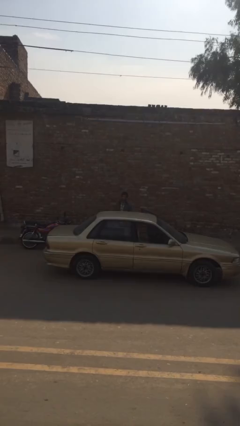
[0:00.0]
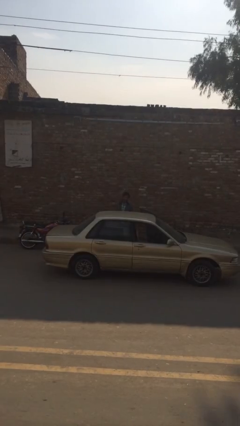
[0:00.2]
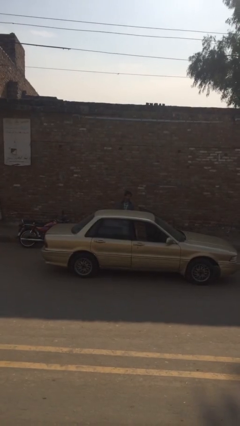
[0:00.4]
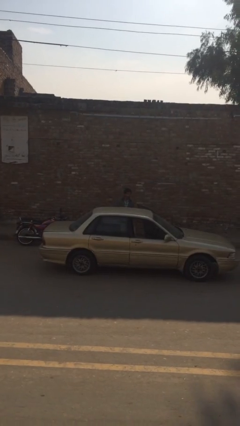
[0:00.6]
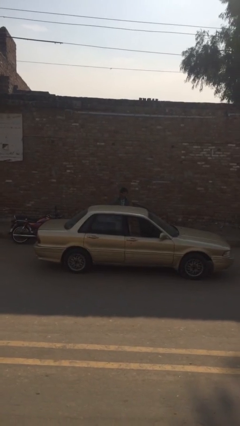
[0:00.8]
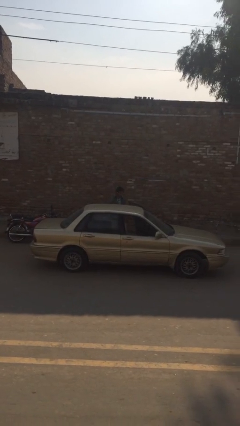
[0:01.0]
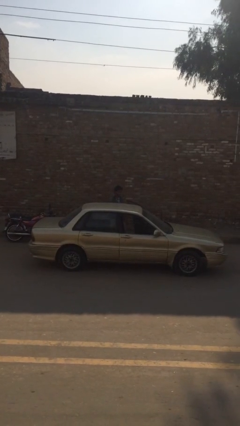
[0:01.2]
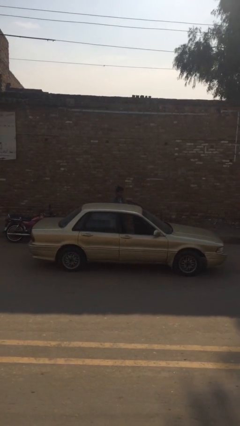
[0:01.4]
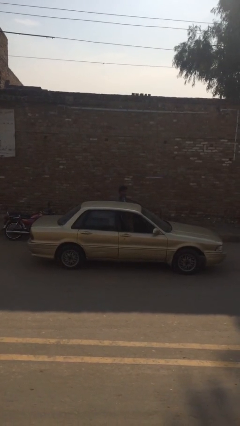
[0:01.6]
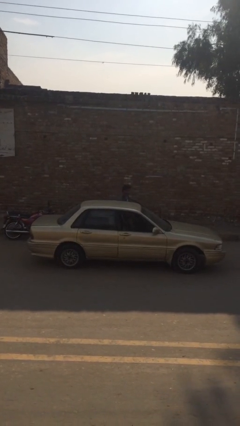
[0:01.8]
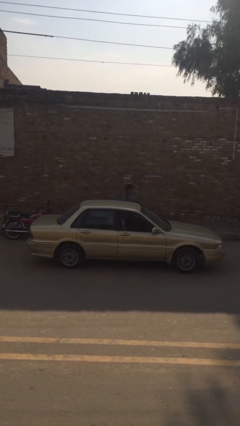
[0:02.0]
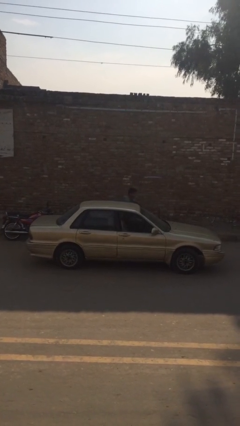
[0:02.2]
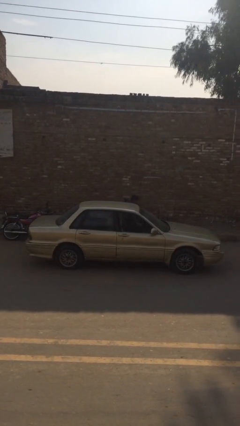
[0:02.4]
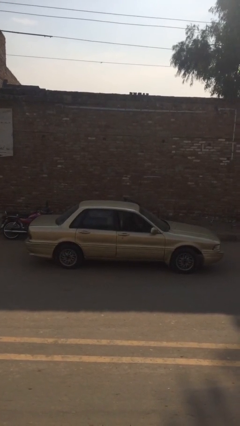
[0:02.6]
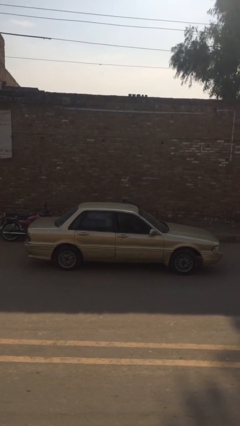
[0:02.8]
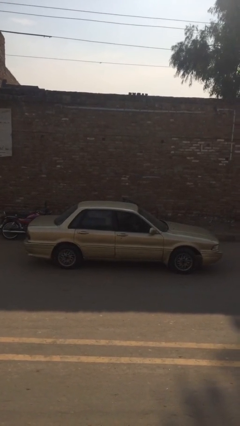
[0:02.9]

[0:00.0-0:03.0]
person enters car

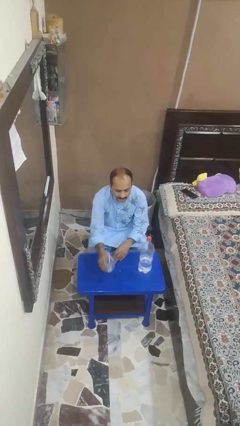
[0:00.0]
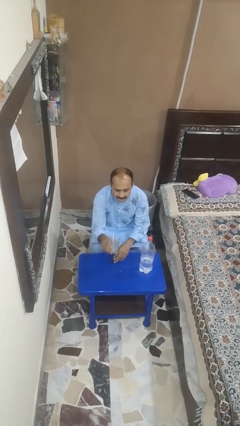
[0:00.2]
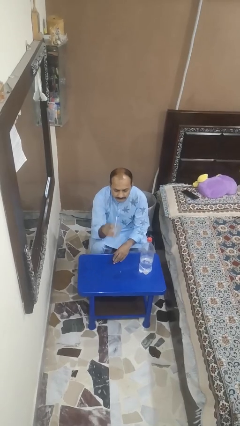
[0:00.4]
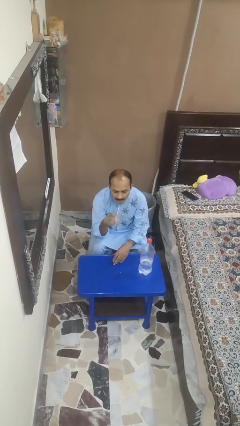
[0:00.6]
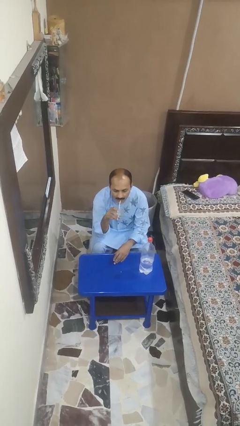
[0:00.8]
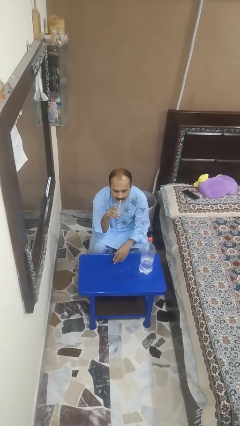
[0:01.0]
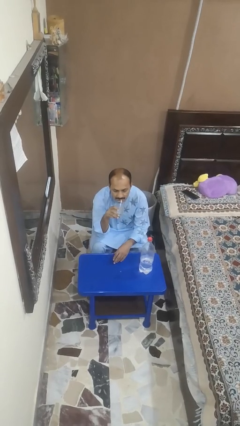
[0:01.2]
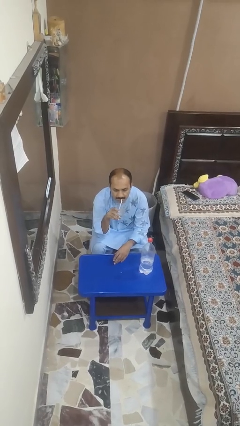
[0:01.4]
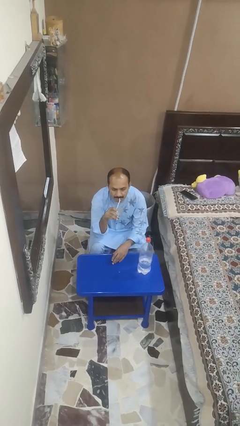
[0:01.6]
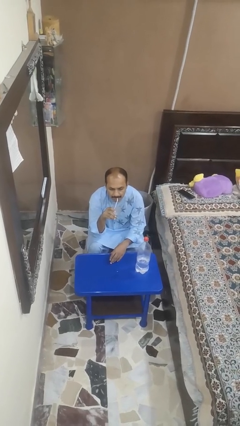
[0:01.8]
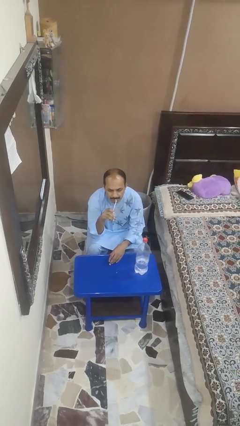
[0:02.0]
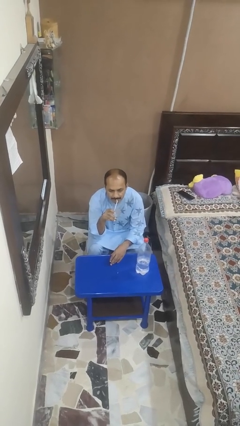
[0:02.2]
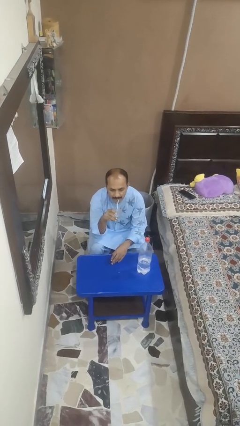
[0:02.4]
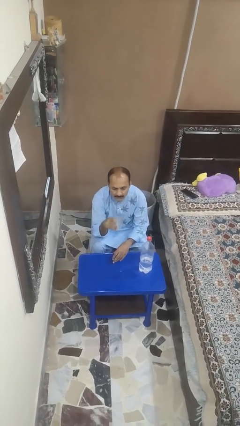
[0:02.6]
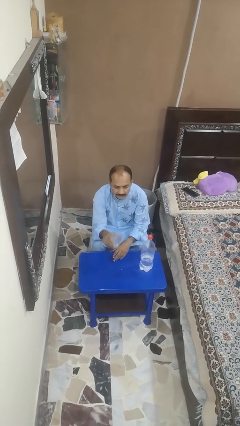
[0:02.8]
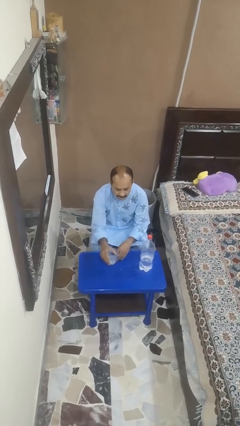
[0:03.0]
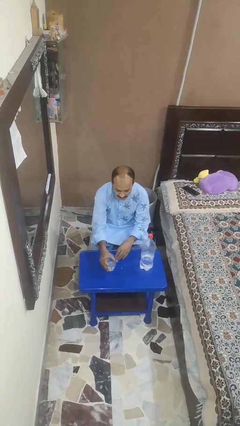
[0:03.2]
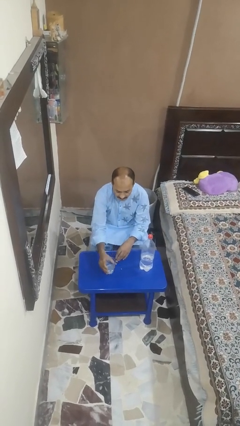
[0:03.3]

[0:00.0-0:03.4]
person drinks from straw

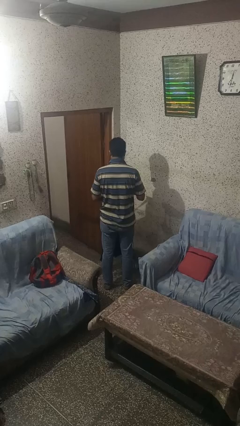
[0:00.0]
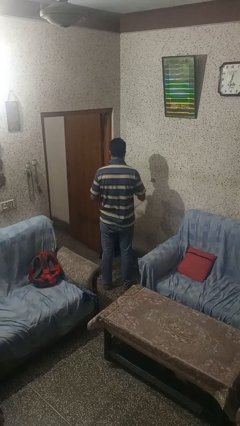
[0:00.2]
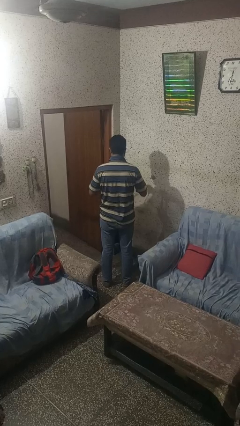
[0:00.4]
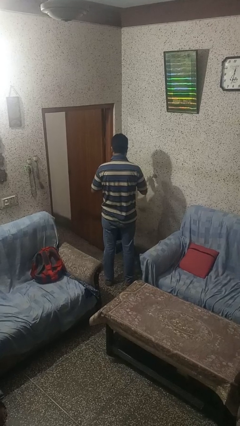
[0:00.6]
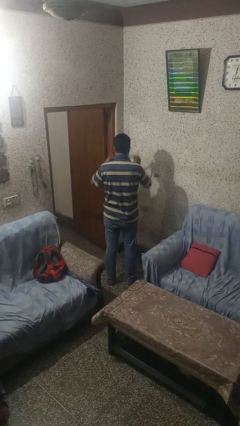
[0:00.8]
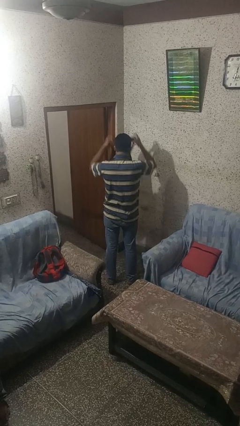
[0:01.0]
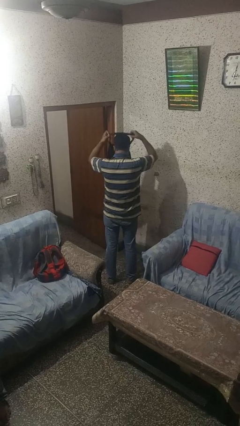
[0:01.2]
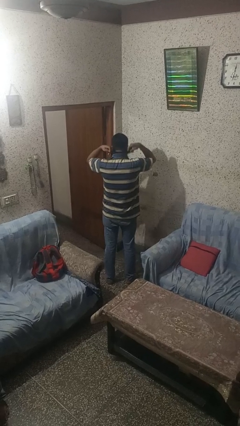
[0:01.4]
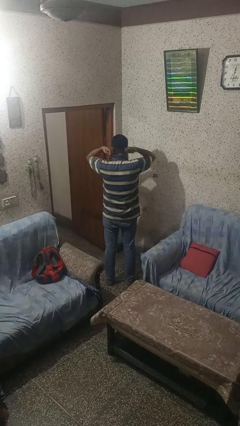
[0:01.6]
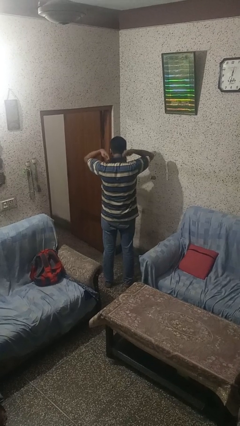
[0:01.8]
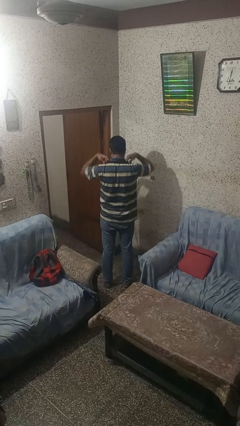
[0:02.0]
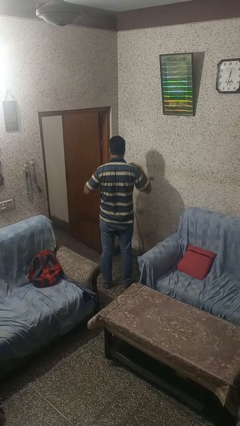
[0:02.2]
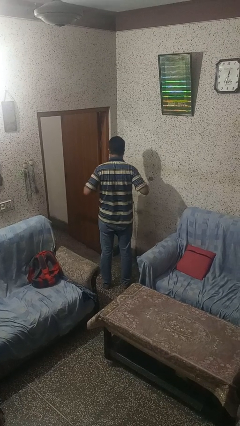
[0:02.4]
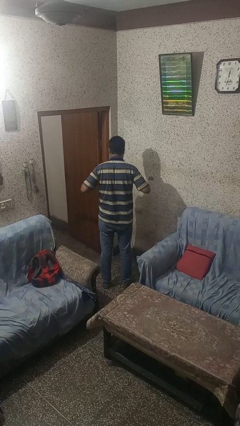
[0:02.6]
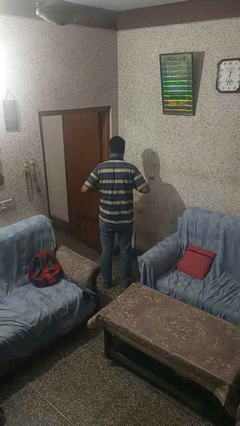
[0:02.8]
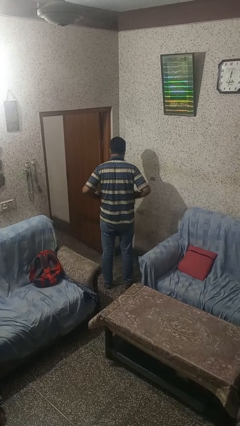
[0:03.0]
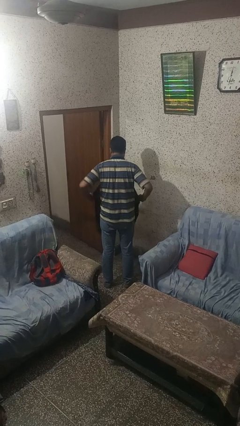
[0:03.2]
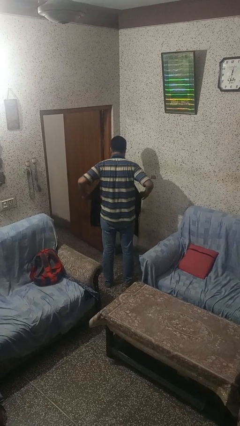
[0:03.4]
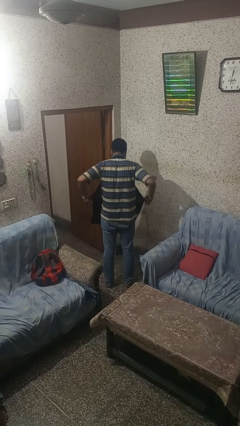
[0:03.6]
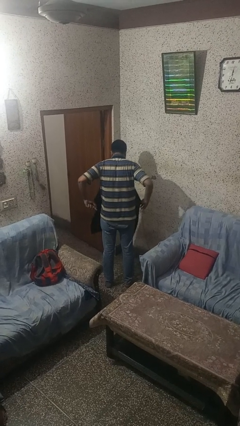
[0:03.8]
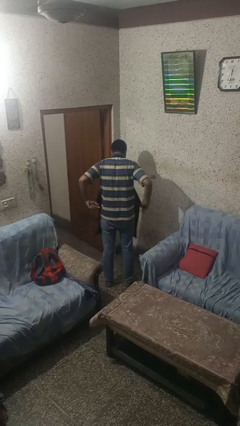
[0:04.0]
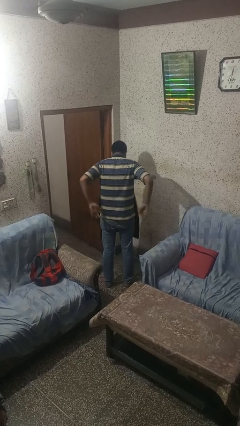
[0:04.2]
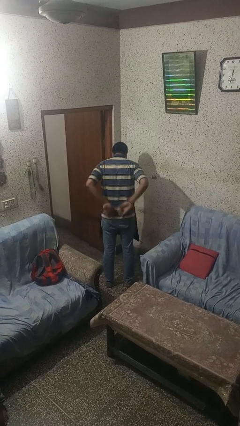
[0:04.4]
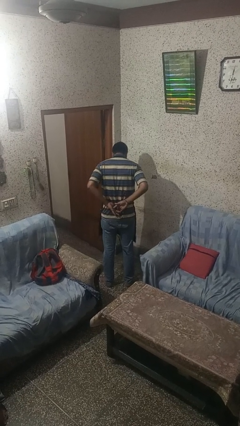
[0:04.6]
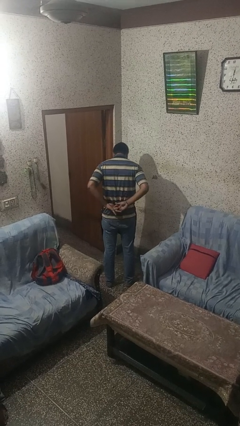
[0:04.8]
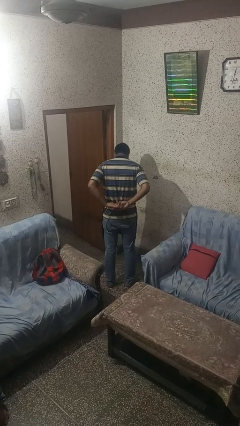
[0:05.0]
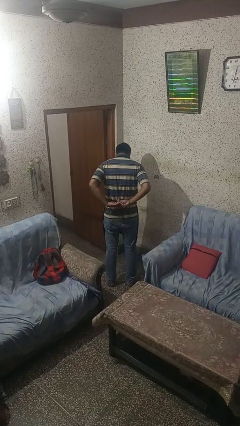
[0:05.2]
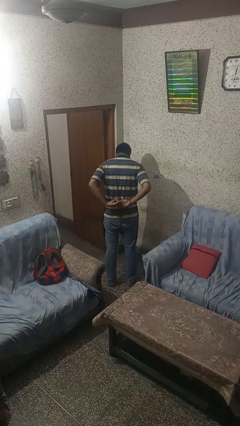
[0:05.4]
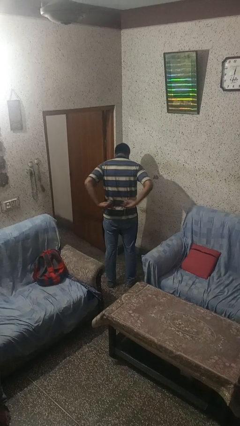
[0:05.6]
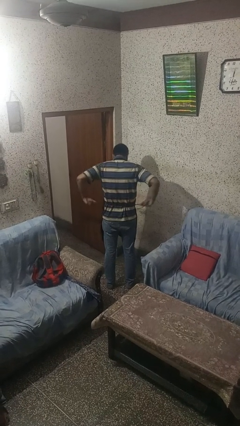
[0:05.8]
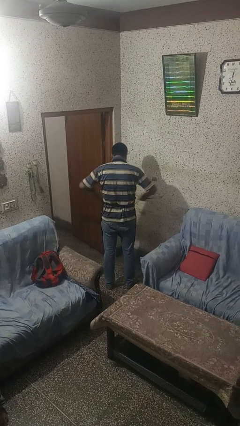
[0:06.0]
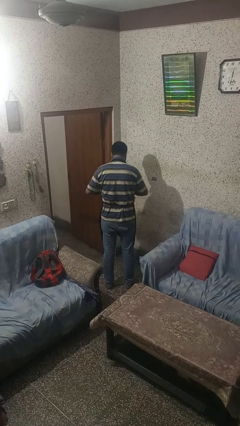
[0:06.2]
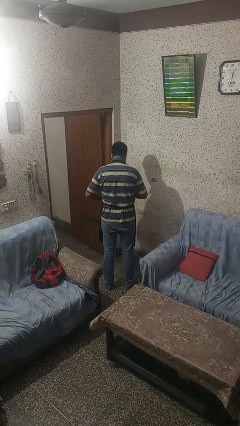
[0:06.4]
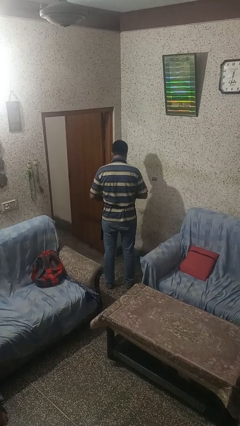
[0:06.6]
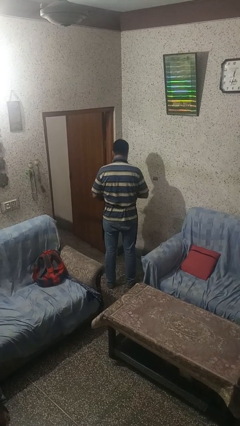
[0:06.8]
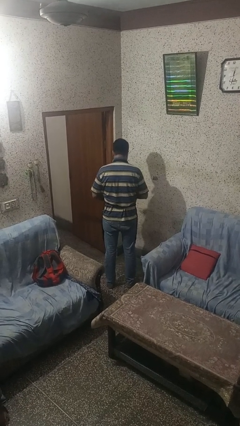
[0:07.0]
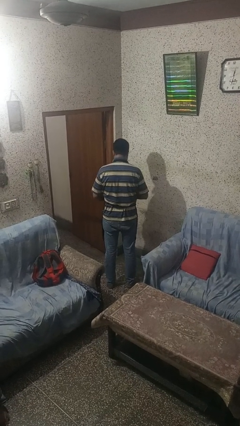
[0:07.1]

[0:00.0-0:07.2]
person puts on apron

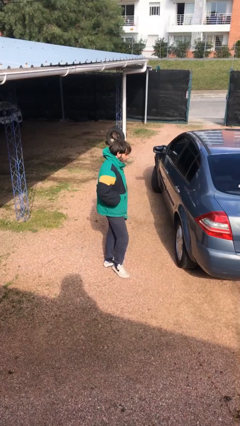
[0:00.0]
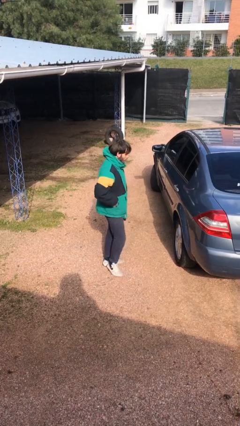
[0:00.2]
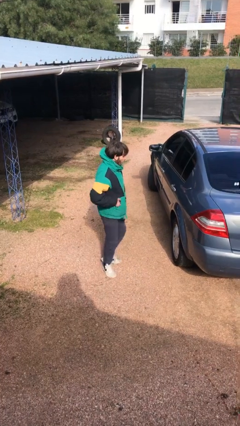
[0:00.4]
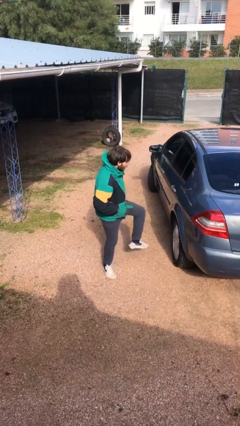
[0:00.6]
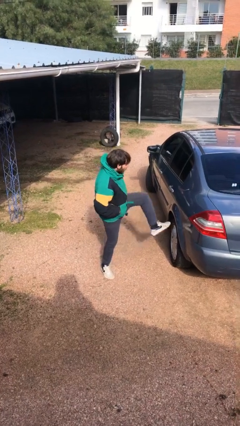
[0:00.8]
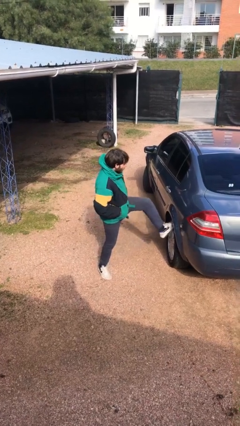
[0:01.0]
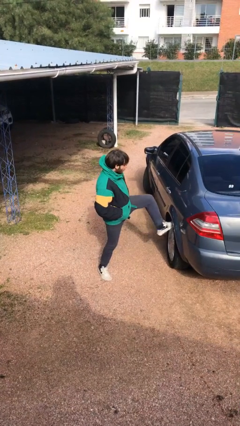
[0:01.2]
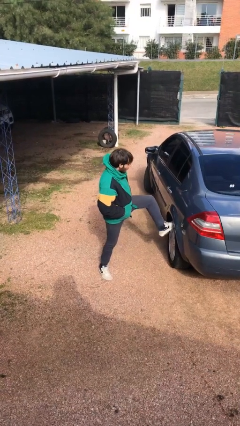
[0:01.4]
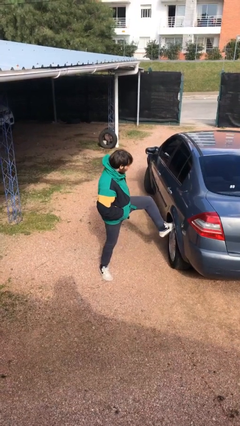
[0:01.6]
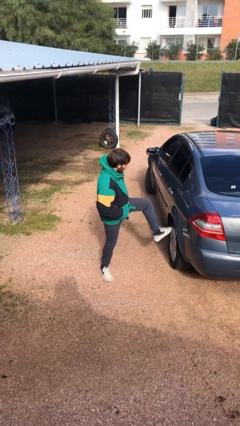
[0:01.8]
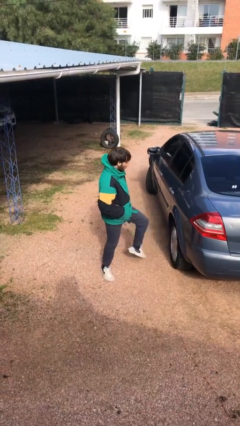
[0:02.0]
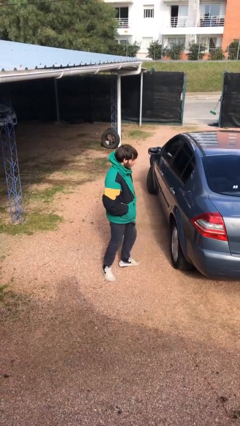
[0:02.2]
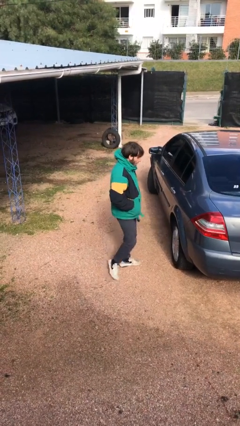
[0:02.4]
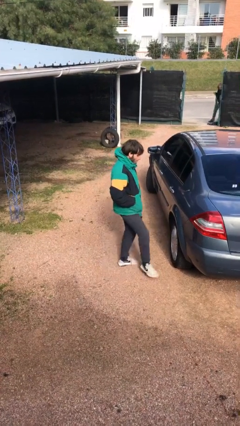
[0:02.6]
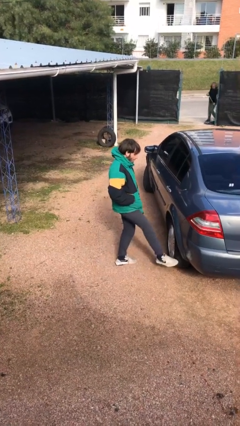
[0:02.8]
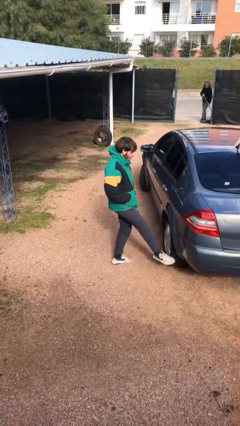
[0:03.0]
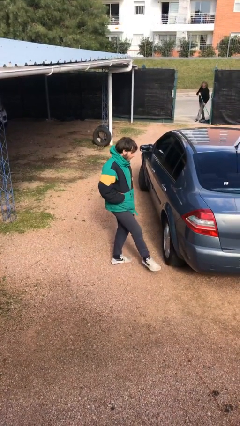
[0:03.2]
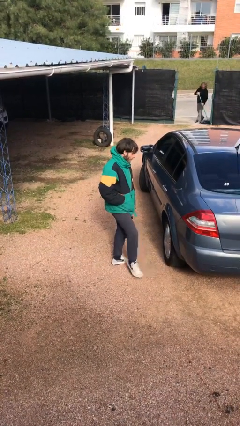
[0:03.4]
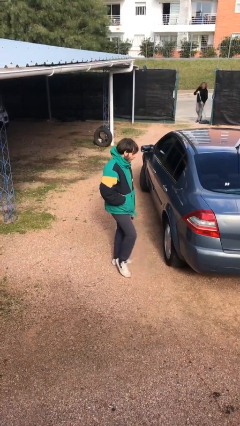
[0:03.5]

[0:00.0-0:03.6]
person kicks car tires

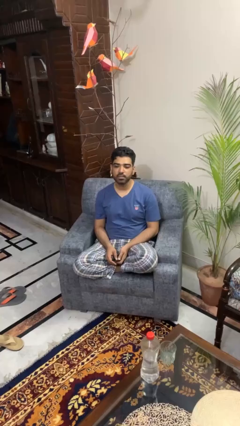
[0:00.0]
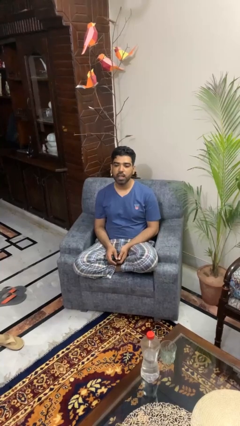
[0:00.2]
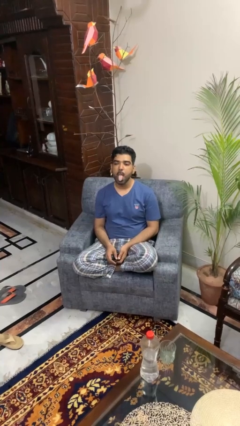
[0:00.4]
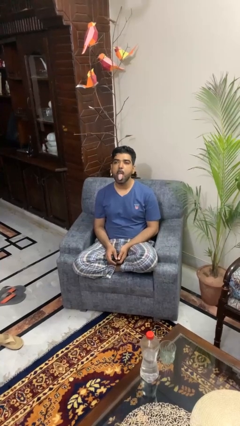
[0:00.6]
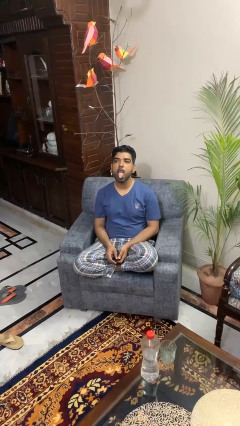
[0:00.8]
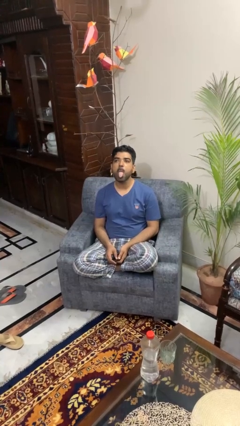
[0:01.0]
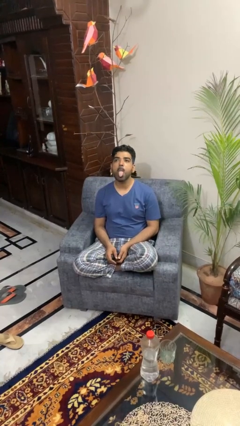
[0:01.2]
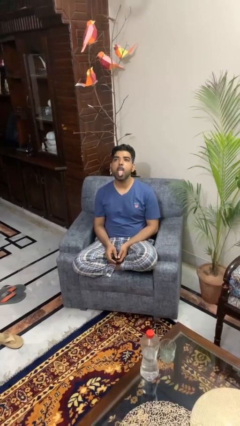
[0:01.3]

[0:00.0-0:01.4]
person sticks out tongue
